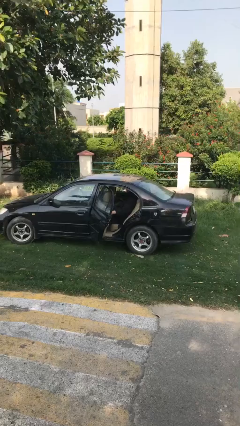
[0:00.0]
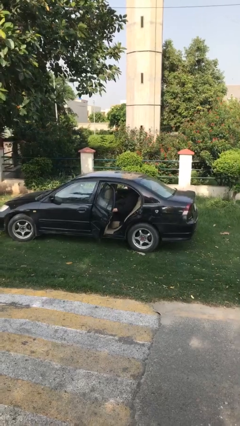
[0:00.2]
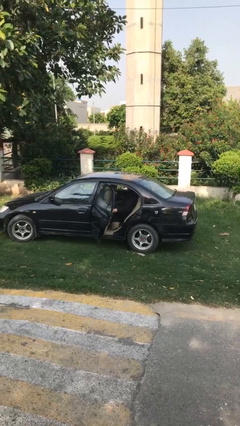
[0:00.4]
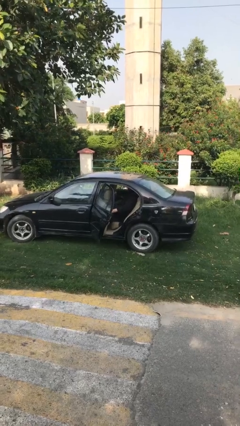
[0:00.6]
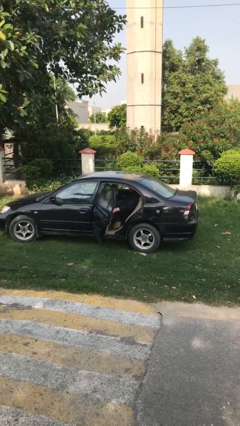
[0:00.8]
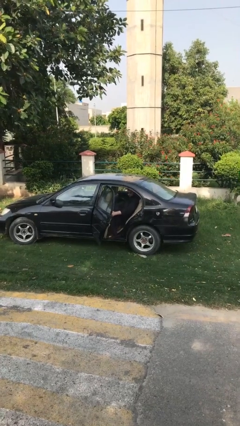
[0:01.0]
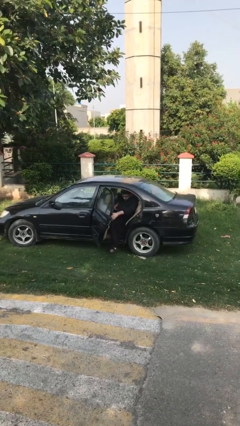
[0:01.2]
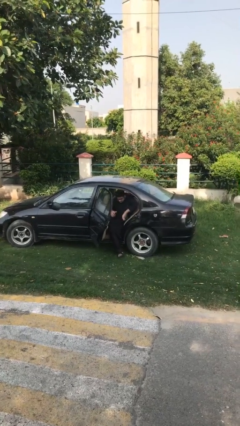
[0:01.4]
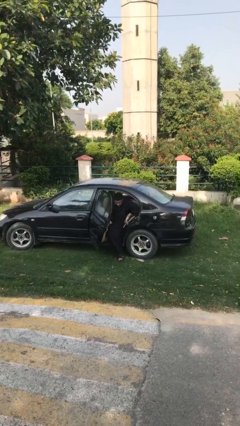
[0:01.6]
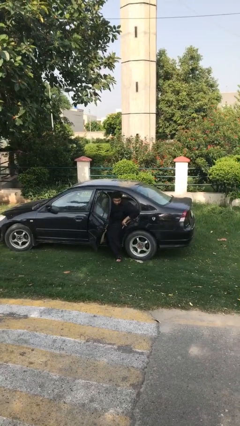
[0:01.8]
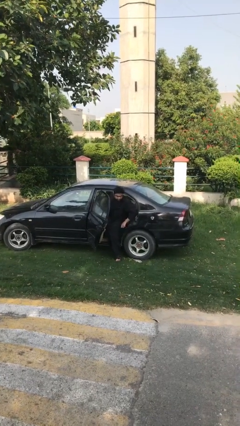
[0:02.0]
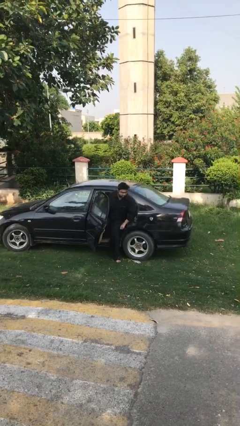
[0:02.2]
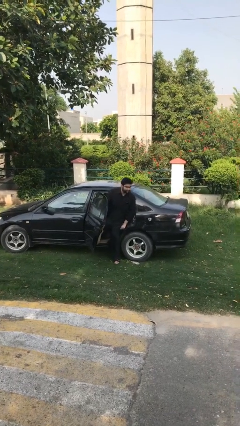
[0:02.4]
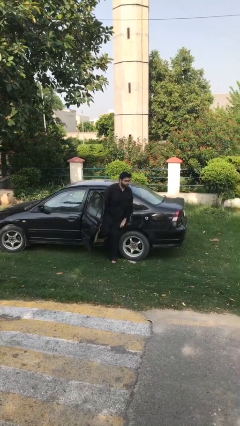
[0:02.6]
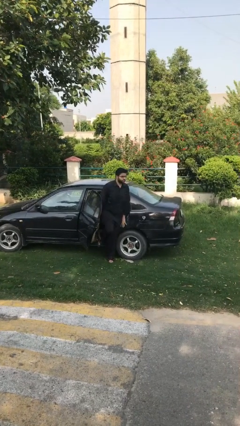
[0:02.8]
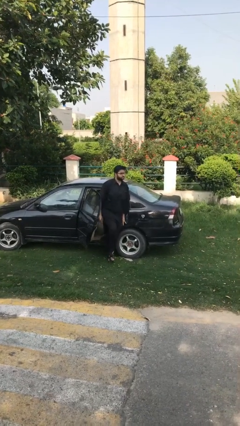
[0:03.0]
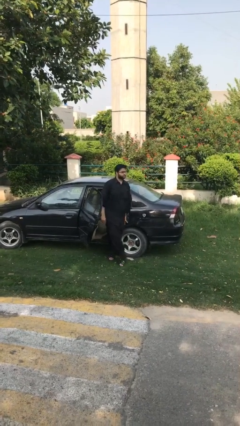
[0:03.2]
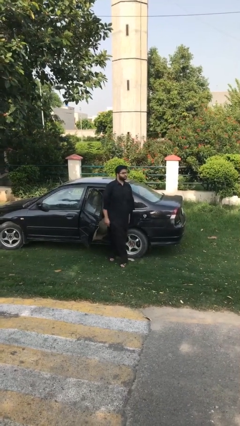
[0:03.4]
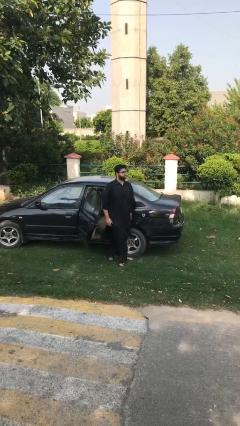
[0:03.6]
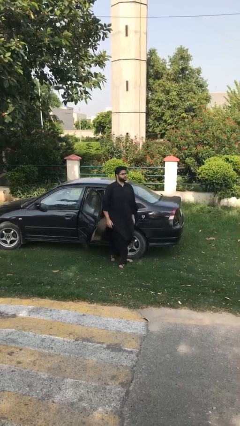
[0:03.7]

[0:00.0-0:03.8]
person exits car

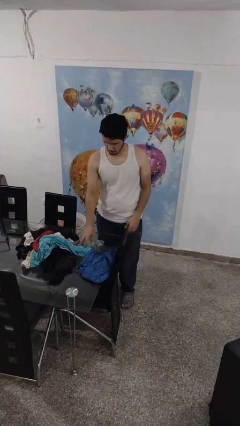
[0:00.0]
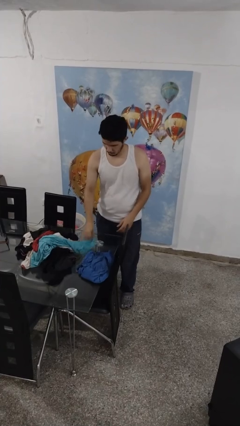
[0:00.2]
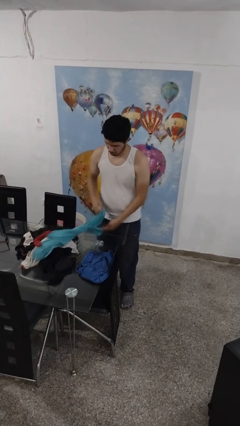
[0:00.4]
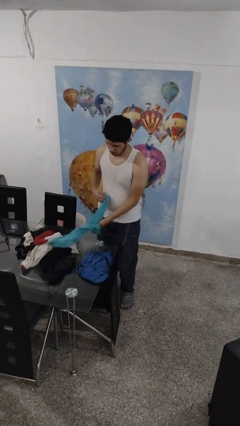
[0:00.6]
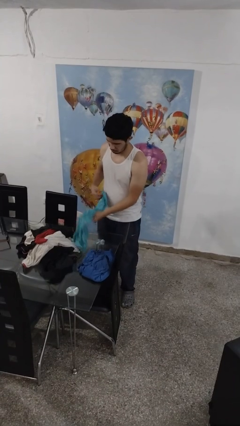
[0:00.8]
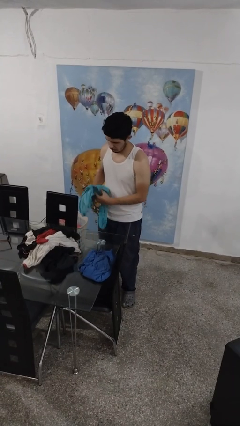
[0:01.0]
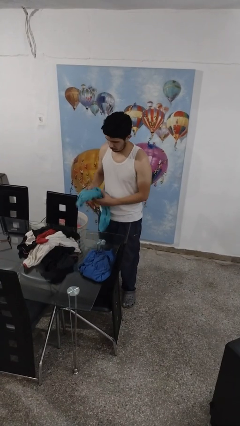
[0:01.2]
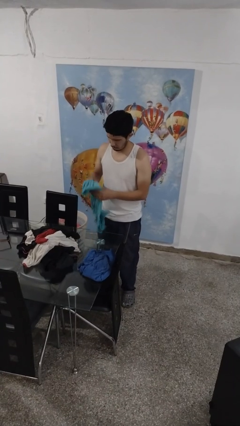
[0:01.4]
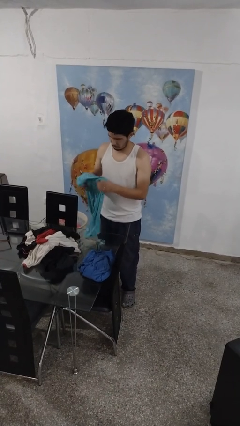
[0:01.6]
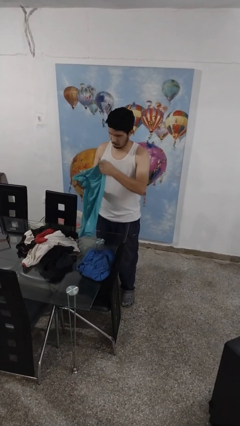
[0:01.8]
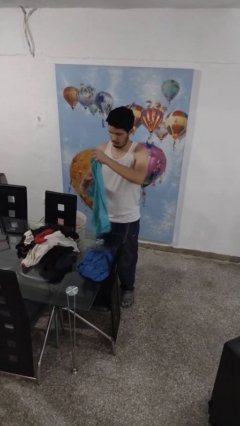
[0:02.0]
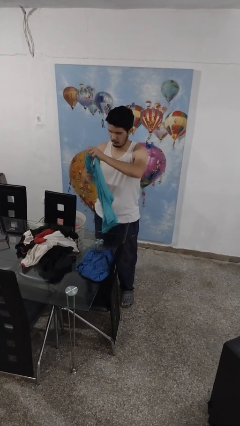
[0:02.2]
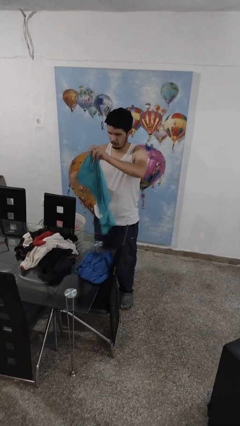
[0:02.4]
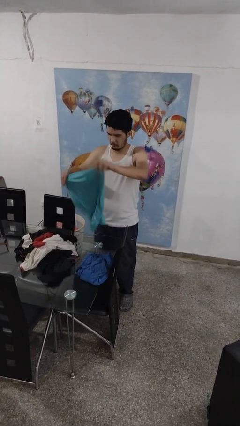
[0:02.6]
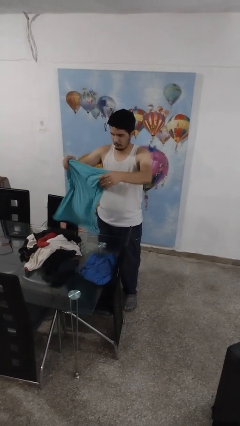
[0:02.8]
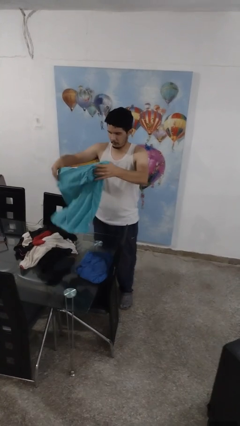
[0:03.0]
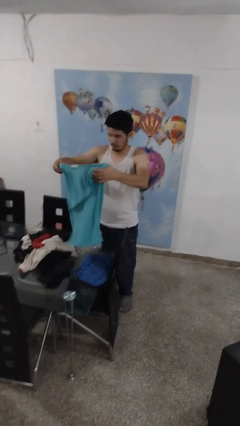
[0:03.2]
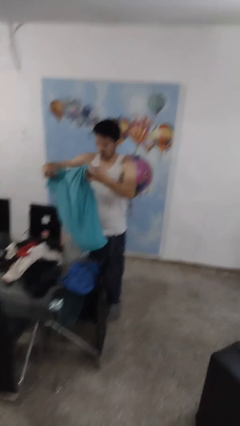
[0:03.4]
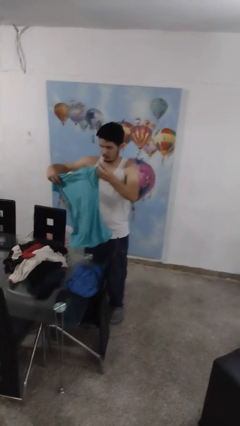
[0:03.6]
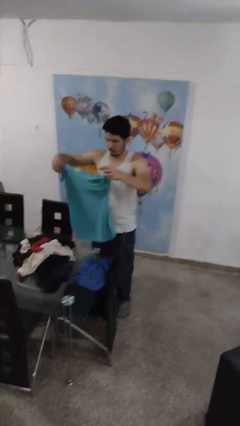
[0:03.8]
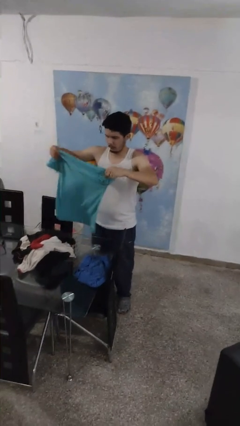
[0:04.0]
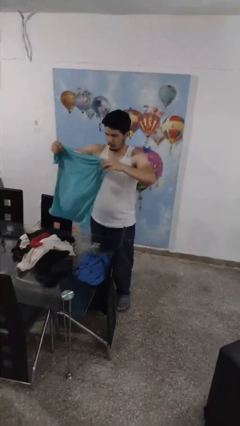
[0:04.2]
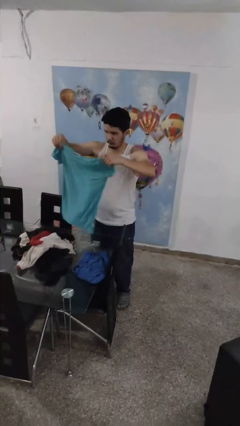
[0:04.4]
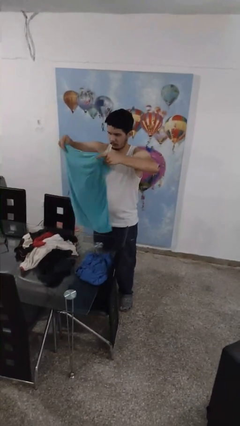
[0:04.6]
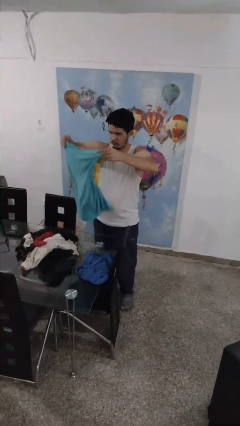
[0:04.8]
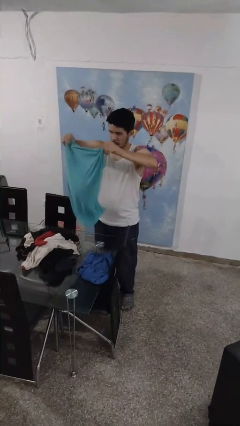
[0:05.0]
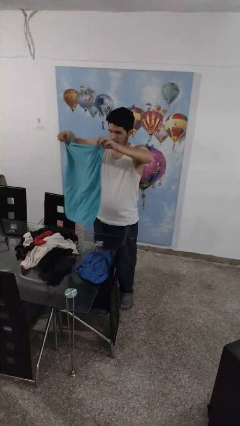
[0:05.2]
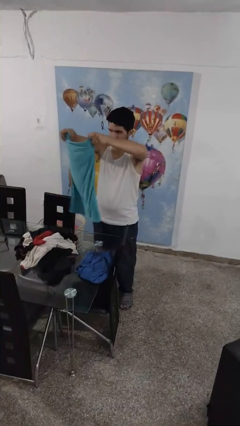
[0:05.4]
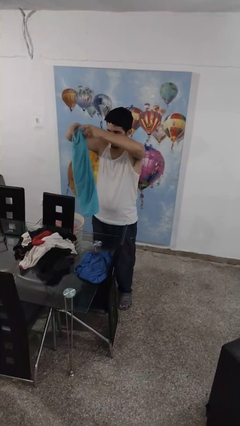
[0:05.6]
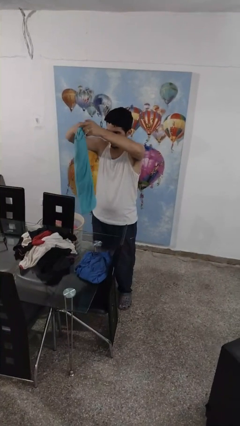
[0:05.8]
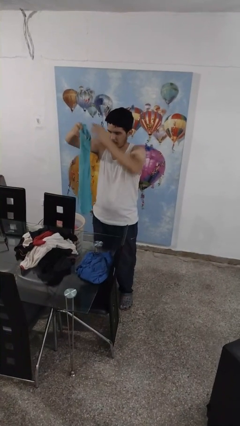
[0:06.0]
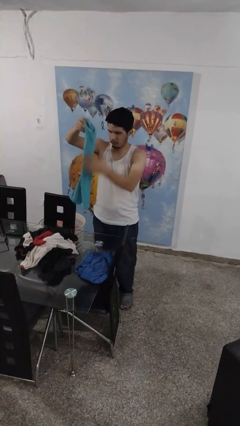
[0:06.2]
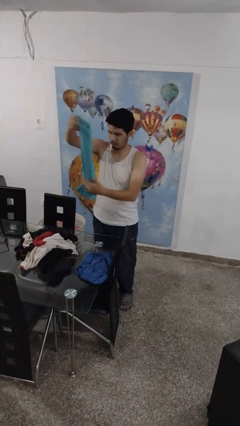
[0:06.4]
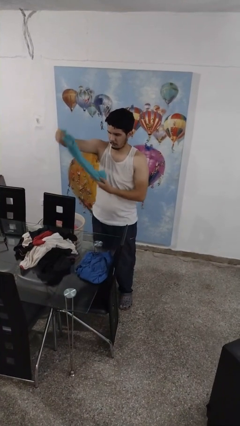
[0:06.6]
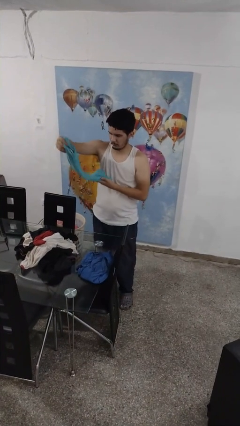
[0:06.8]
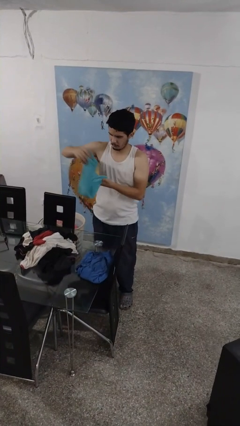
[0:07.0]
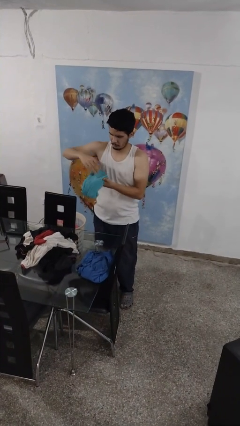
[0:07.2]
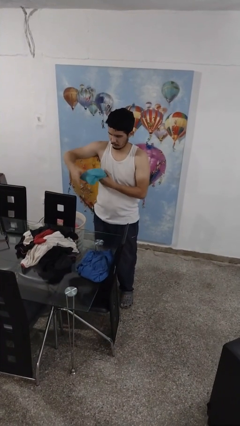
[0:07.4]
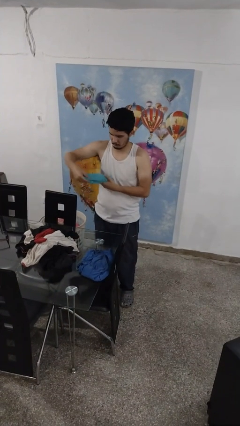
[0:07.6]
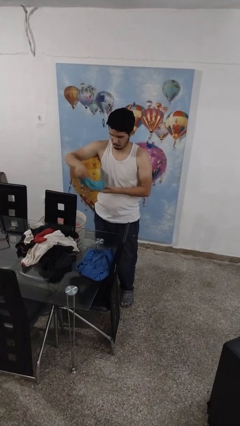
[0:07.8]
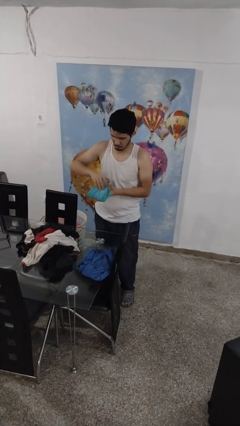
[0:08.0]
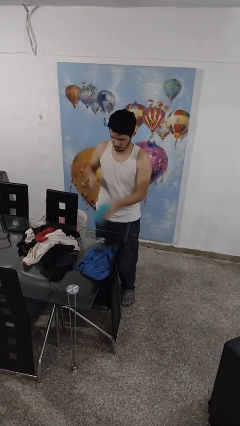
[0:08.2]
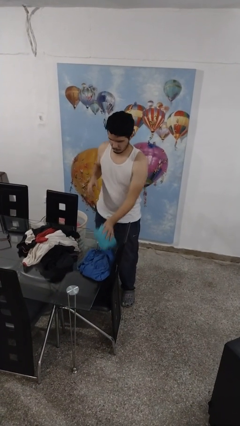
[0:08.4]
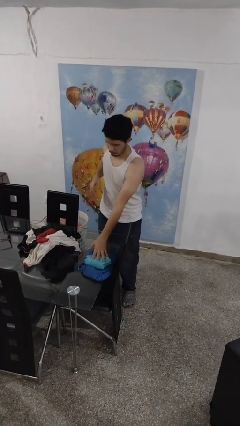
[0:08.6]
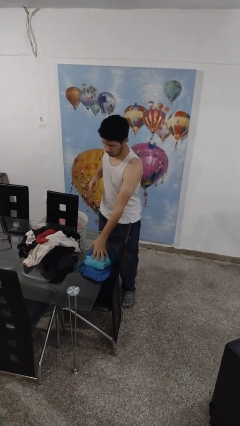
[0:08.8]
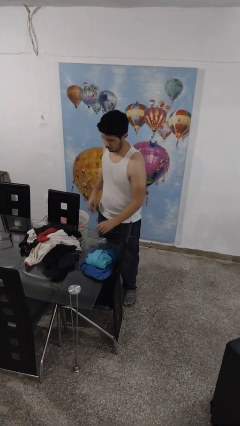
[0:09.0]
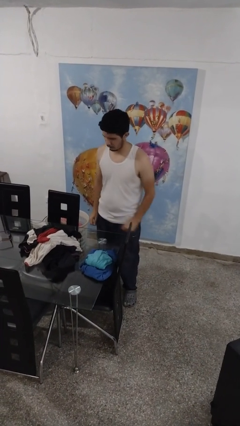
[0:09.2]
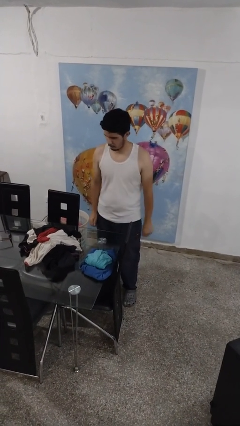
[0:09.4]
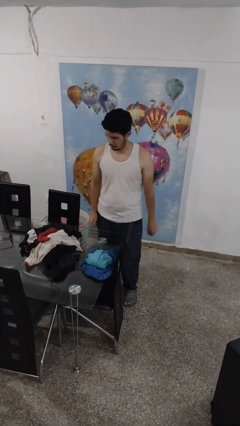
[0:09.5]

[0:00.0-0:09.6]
person folds shirt

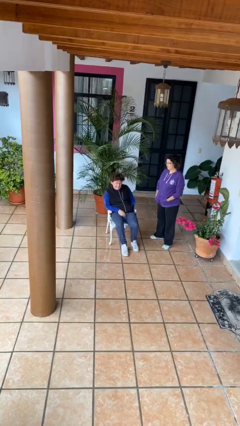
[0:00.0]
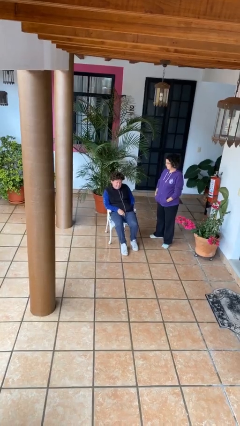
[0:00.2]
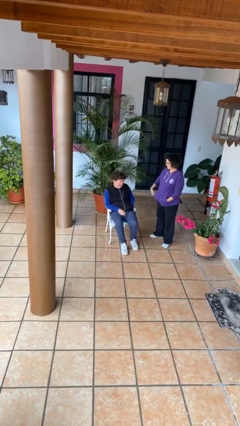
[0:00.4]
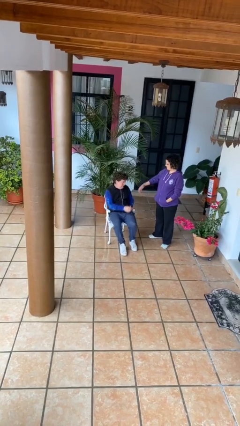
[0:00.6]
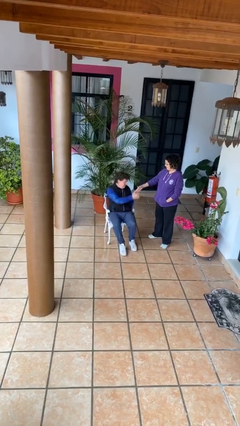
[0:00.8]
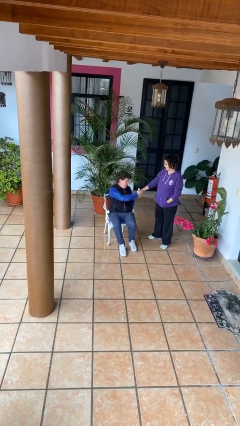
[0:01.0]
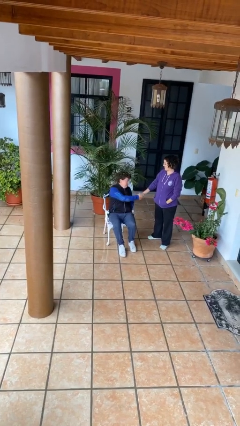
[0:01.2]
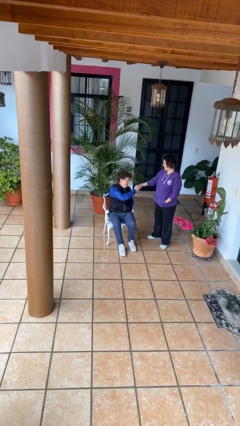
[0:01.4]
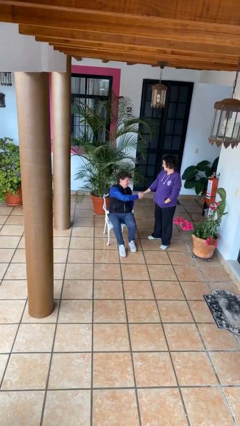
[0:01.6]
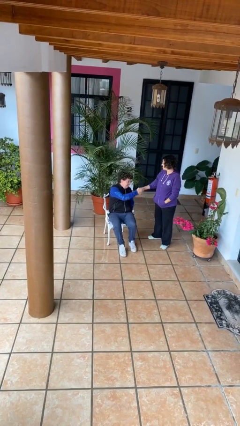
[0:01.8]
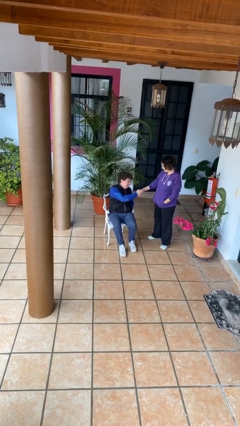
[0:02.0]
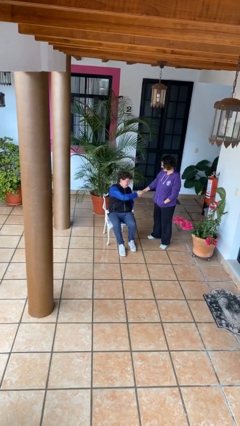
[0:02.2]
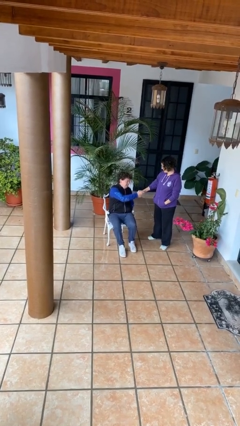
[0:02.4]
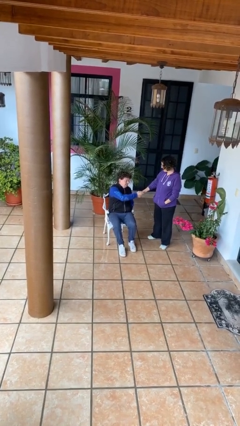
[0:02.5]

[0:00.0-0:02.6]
person shakes hand

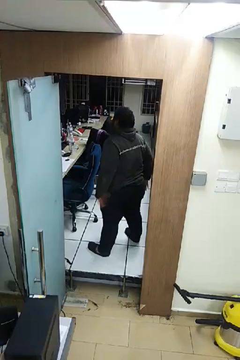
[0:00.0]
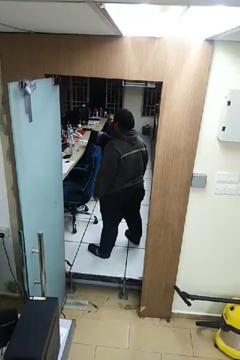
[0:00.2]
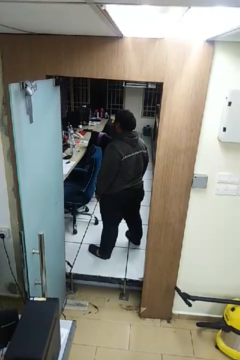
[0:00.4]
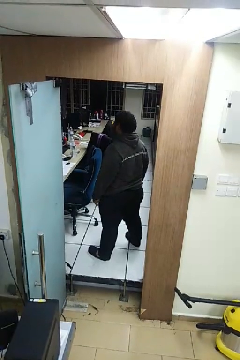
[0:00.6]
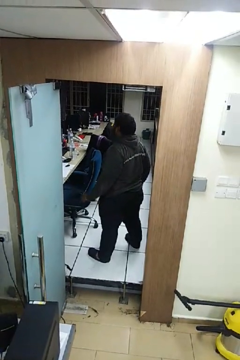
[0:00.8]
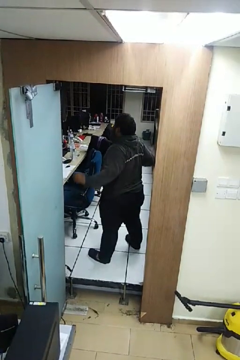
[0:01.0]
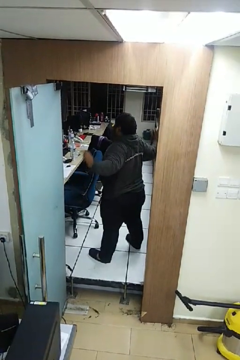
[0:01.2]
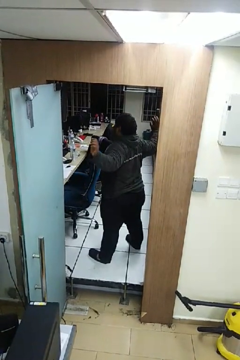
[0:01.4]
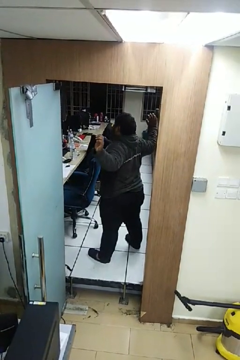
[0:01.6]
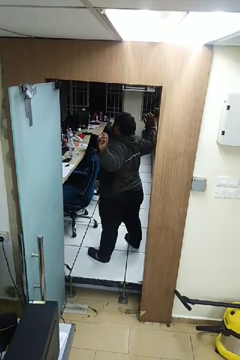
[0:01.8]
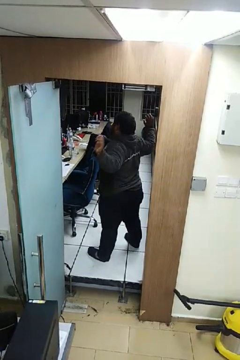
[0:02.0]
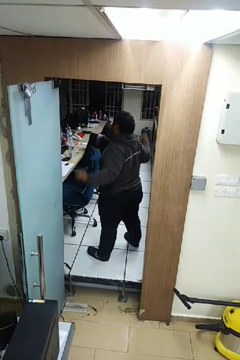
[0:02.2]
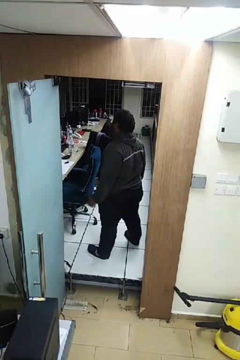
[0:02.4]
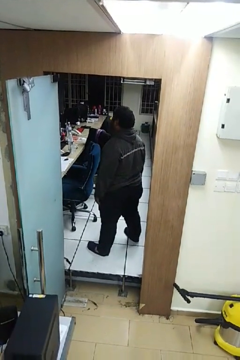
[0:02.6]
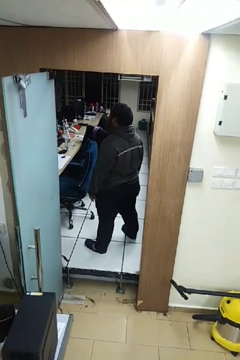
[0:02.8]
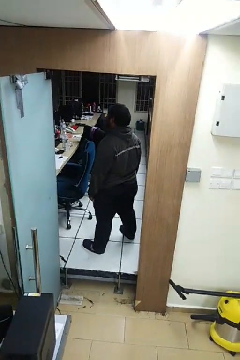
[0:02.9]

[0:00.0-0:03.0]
person stretches arms to side
